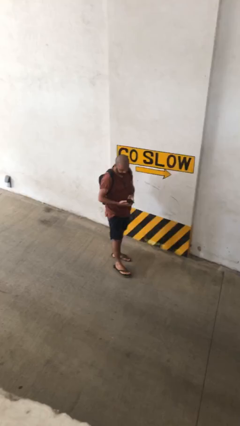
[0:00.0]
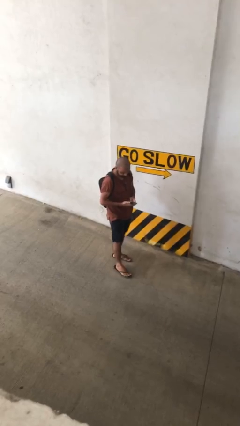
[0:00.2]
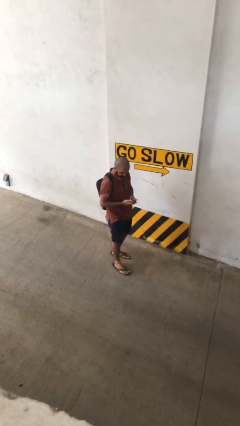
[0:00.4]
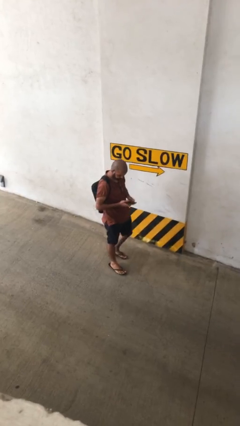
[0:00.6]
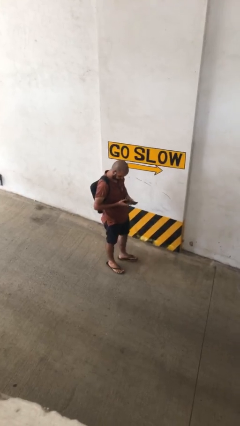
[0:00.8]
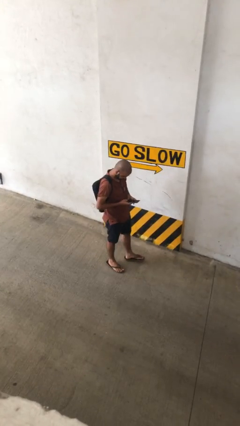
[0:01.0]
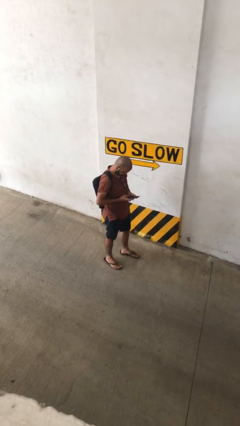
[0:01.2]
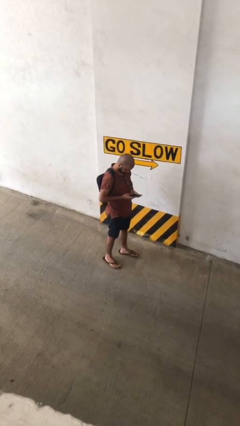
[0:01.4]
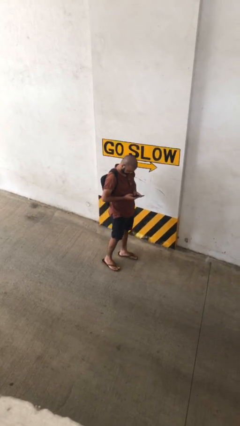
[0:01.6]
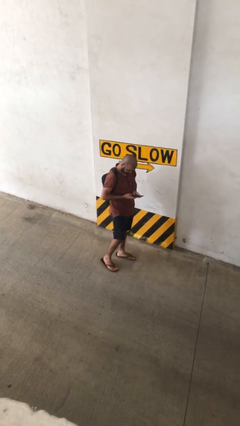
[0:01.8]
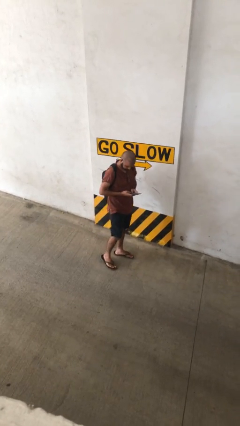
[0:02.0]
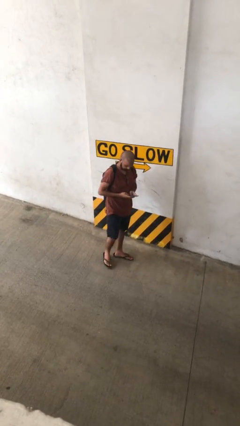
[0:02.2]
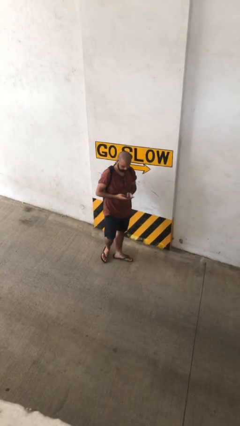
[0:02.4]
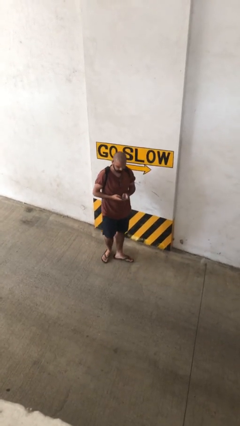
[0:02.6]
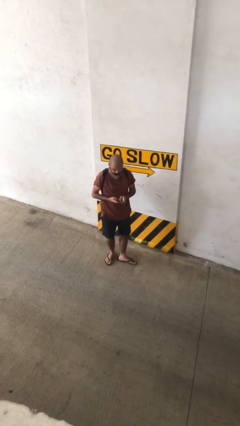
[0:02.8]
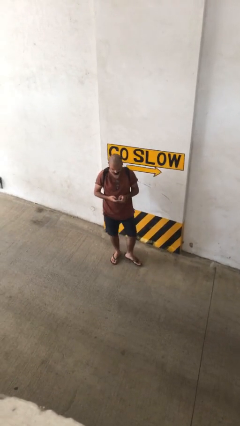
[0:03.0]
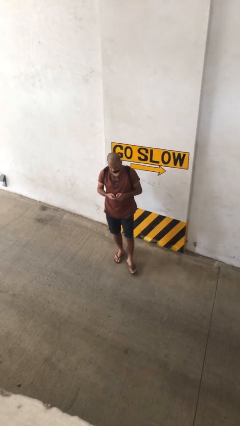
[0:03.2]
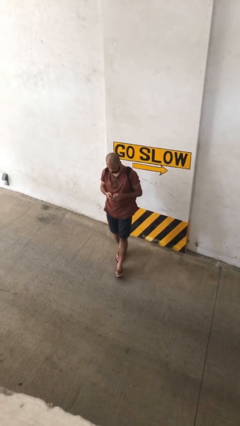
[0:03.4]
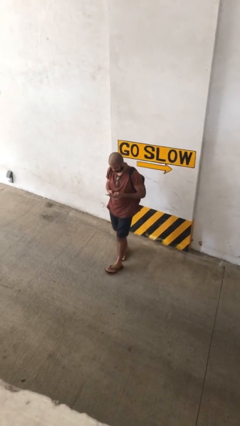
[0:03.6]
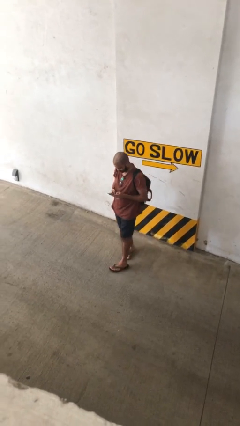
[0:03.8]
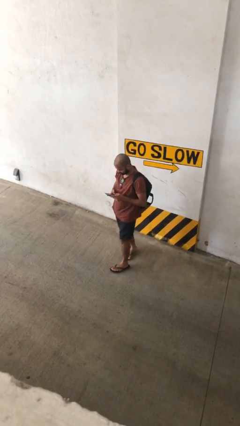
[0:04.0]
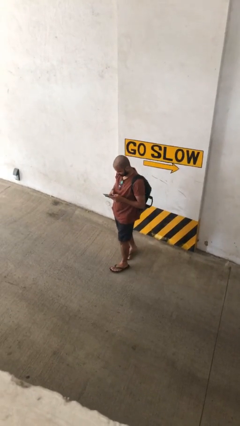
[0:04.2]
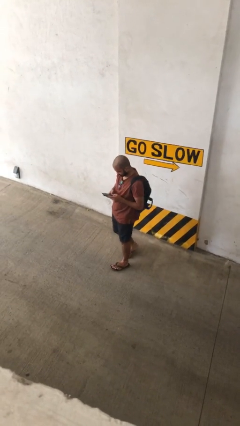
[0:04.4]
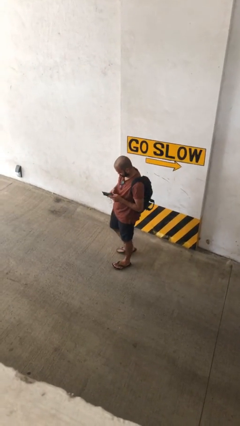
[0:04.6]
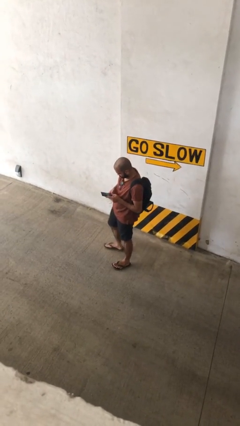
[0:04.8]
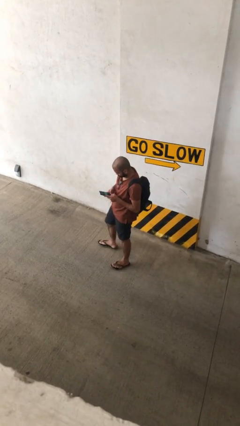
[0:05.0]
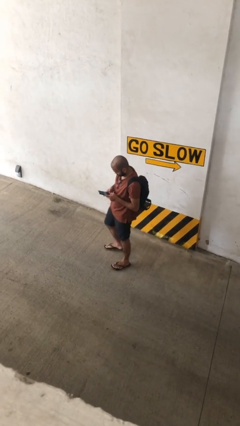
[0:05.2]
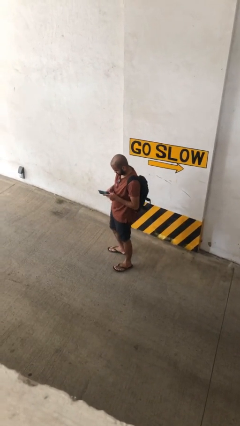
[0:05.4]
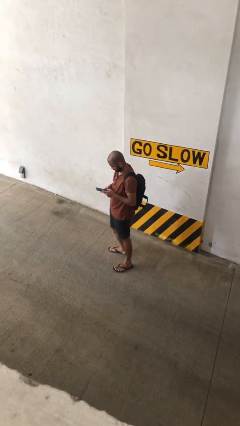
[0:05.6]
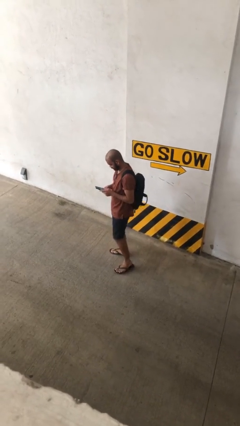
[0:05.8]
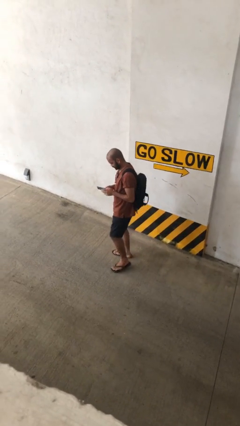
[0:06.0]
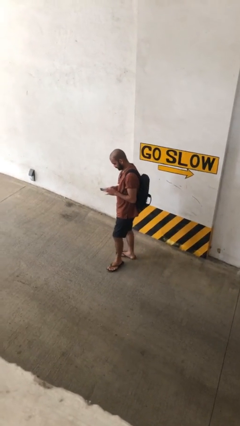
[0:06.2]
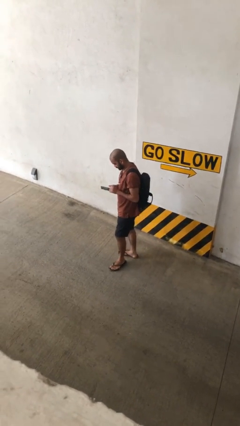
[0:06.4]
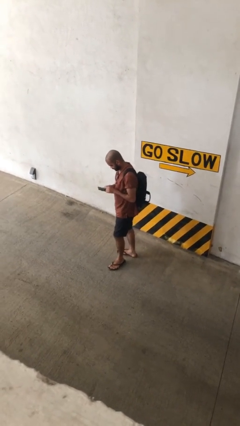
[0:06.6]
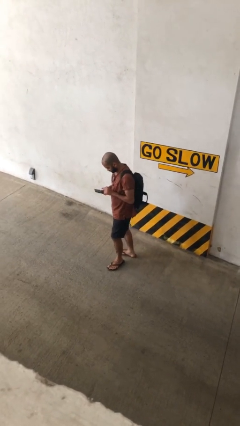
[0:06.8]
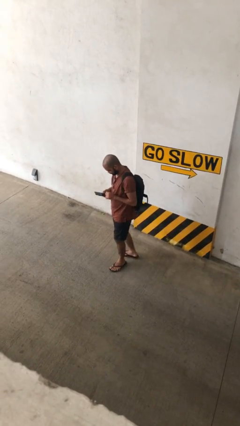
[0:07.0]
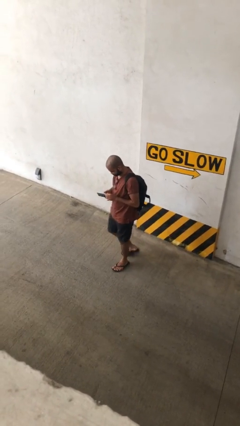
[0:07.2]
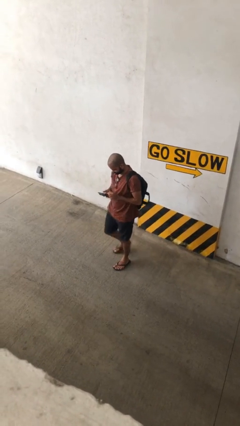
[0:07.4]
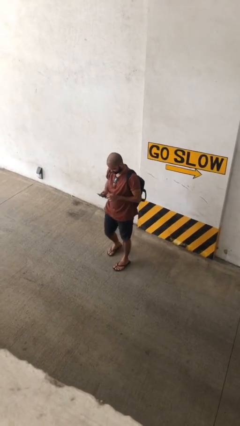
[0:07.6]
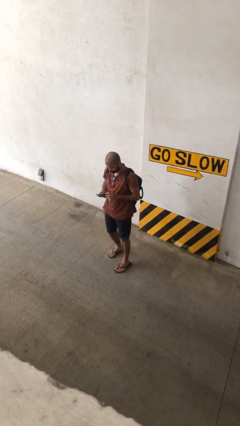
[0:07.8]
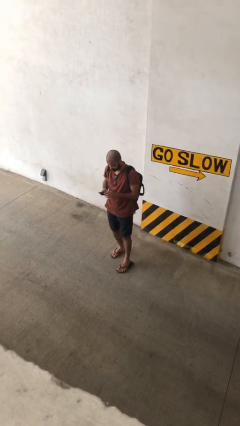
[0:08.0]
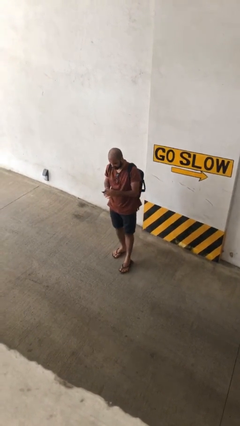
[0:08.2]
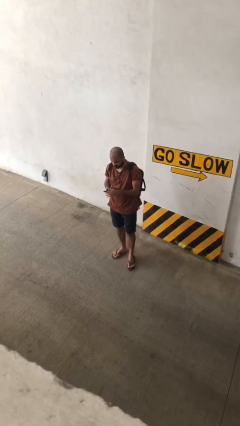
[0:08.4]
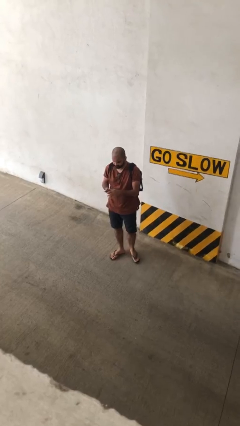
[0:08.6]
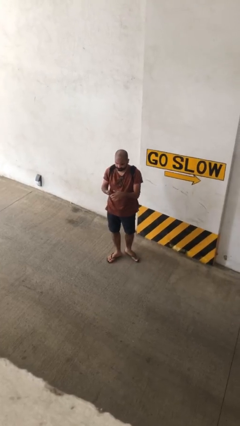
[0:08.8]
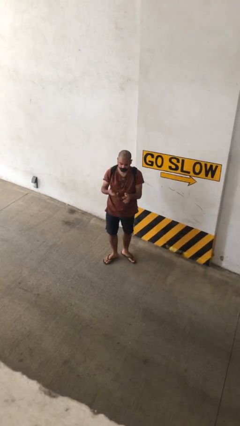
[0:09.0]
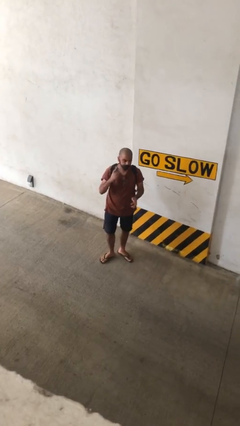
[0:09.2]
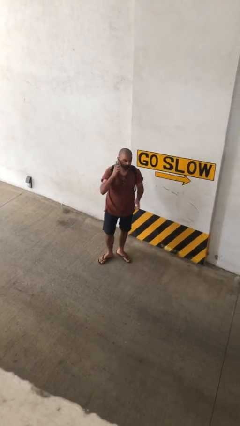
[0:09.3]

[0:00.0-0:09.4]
person texts on phone

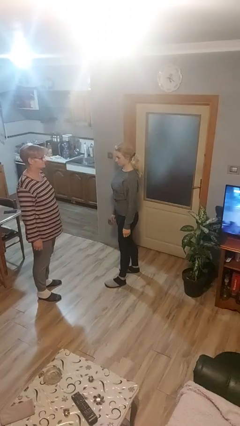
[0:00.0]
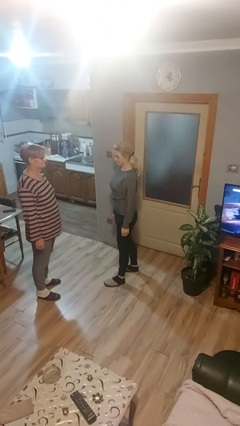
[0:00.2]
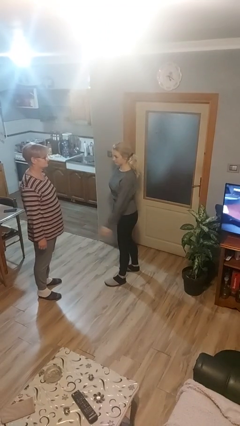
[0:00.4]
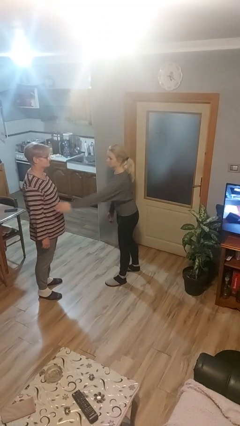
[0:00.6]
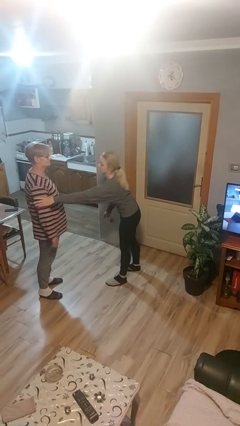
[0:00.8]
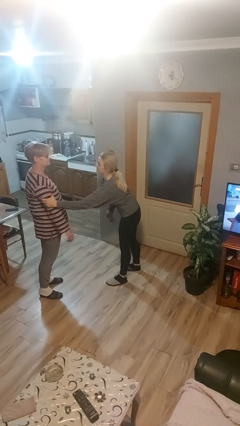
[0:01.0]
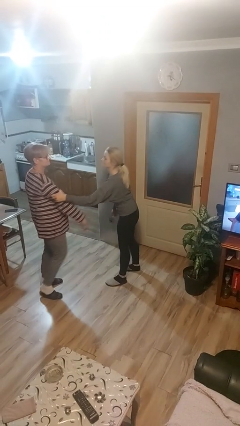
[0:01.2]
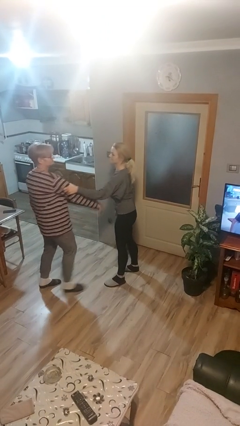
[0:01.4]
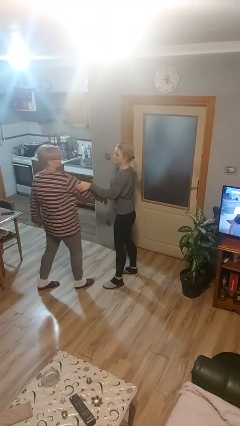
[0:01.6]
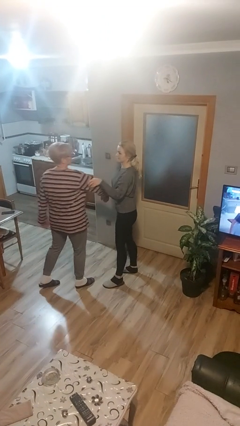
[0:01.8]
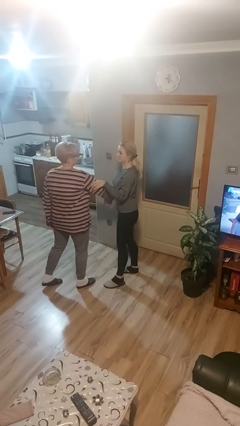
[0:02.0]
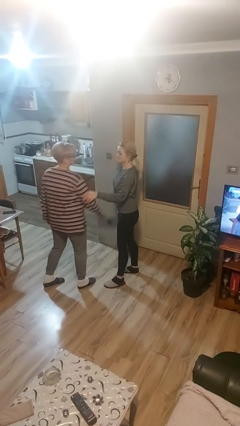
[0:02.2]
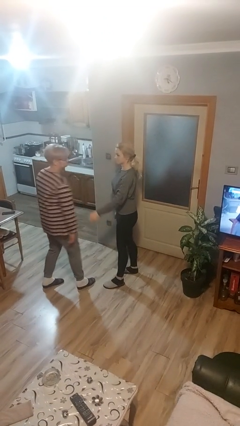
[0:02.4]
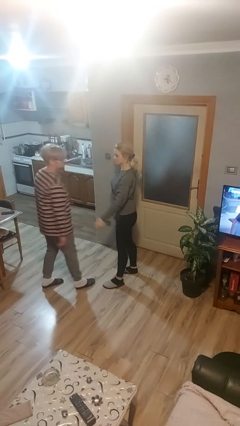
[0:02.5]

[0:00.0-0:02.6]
person grabs person by bicep

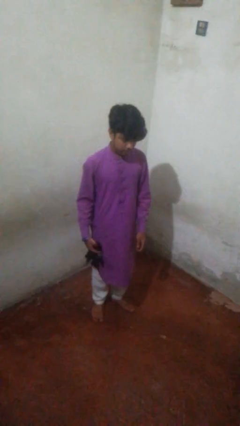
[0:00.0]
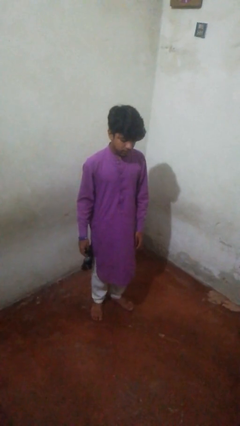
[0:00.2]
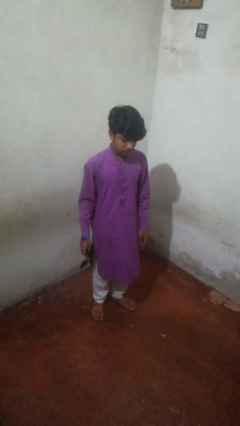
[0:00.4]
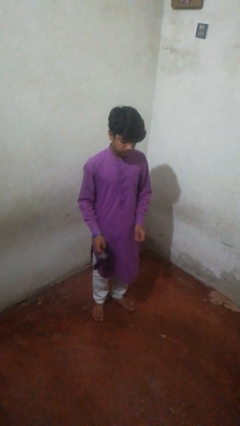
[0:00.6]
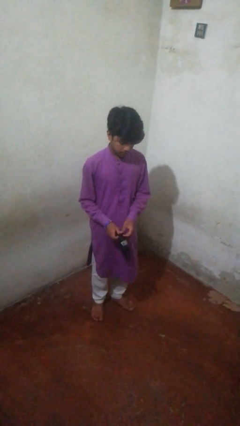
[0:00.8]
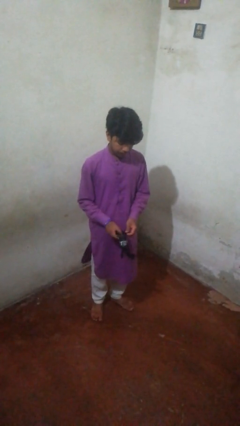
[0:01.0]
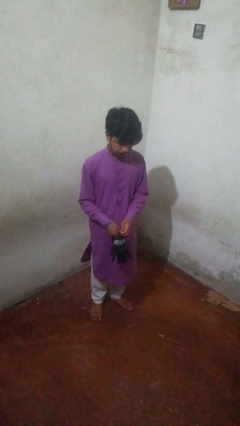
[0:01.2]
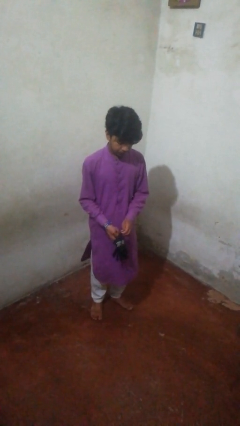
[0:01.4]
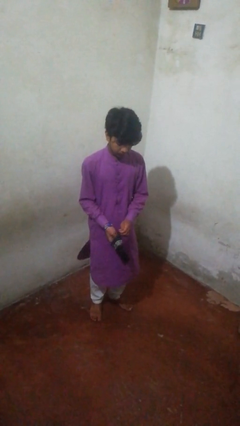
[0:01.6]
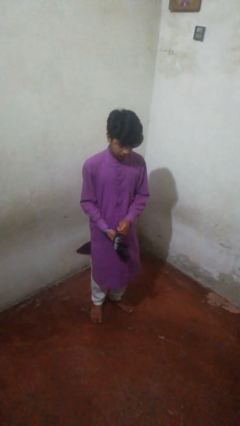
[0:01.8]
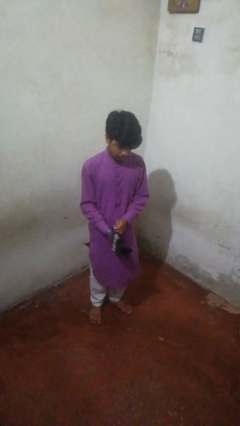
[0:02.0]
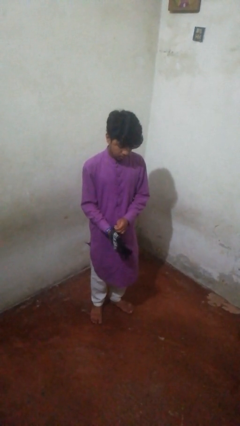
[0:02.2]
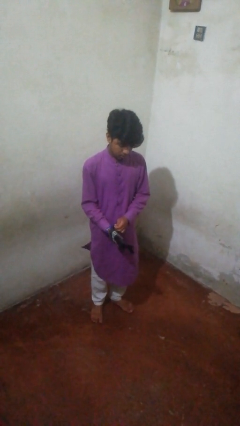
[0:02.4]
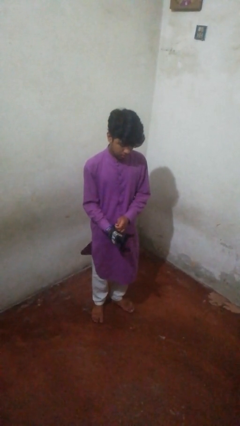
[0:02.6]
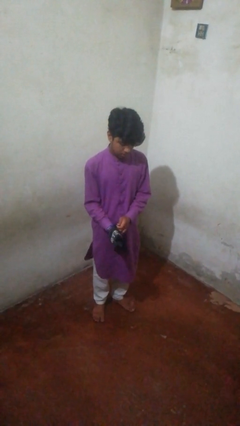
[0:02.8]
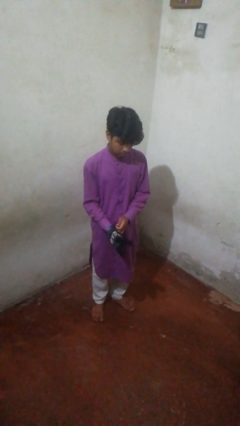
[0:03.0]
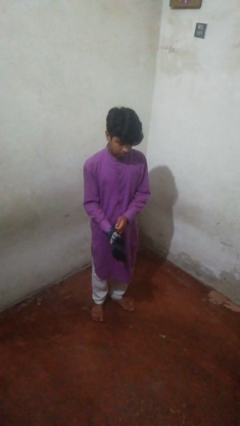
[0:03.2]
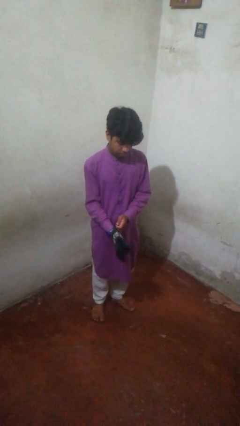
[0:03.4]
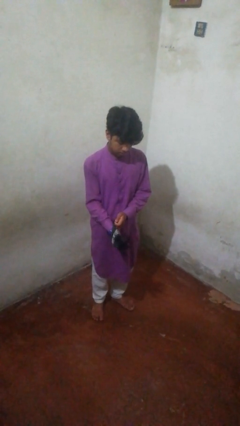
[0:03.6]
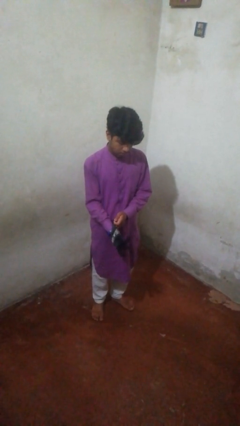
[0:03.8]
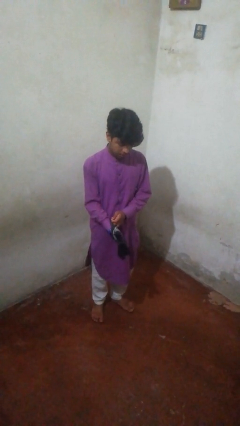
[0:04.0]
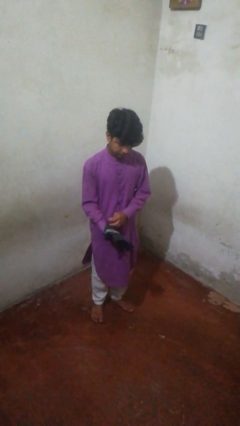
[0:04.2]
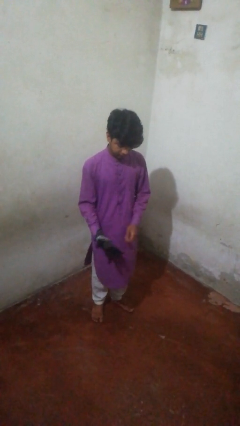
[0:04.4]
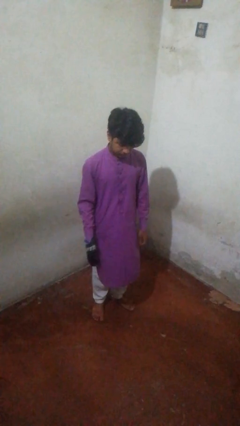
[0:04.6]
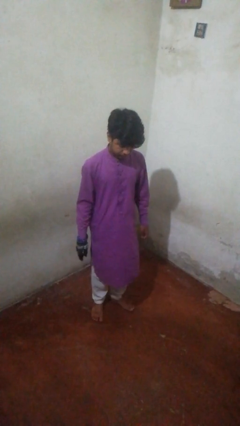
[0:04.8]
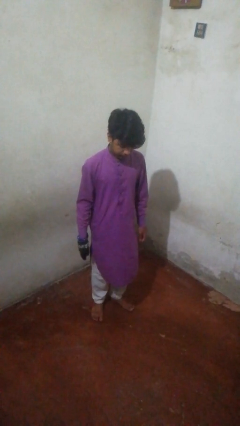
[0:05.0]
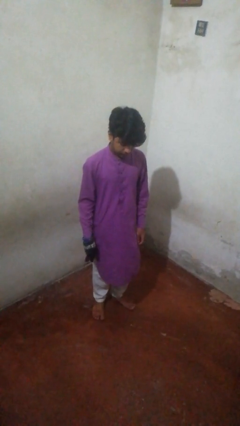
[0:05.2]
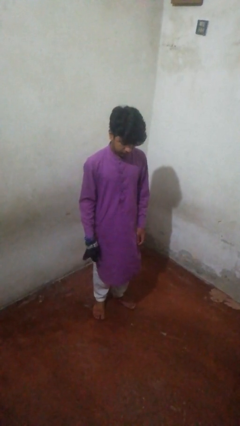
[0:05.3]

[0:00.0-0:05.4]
person puts on gloves

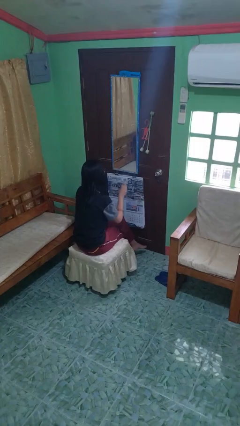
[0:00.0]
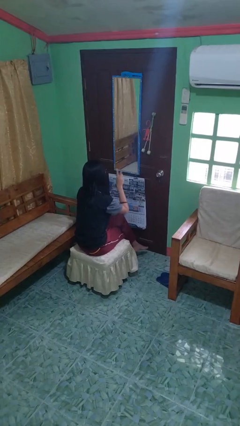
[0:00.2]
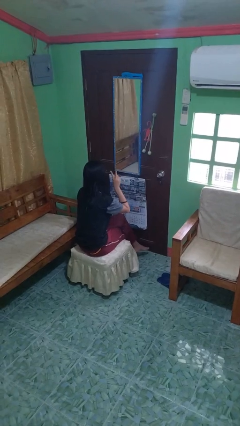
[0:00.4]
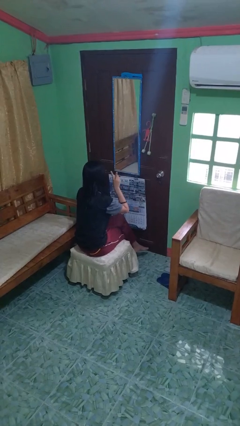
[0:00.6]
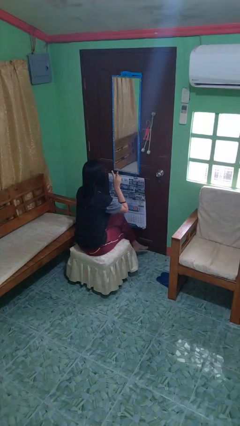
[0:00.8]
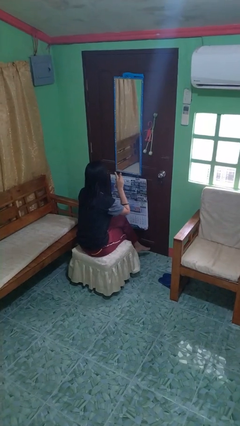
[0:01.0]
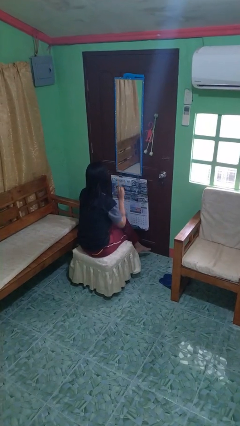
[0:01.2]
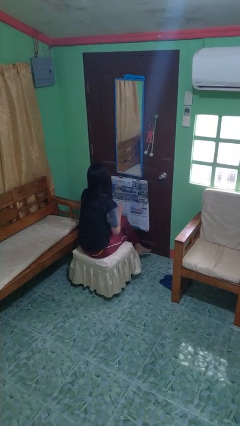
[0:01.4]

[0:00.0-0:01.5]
person gestures peace
